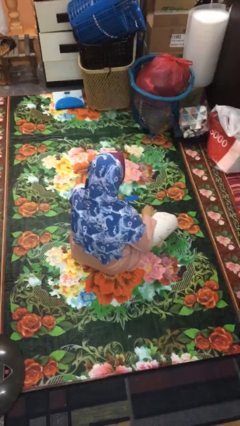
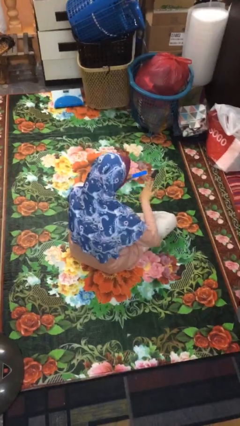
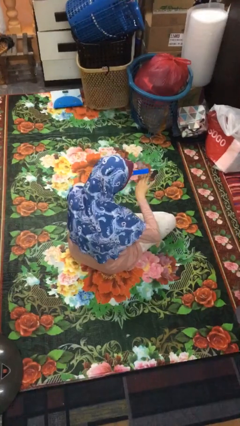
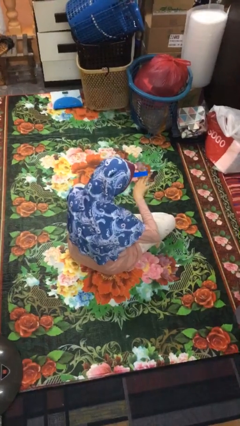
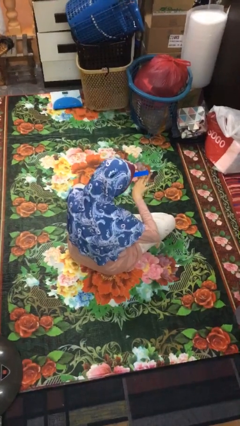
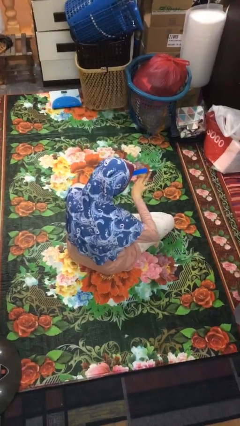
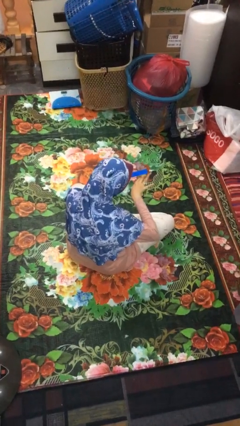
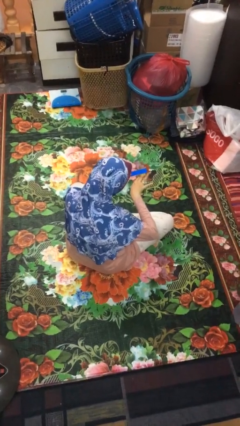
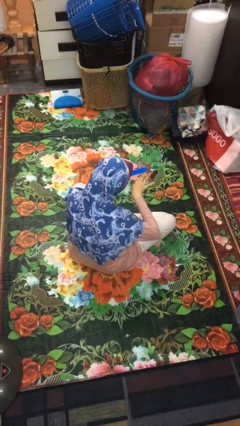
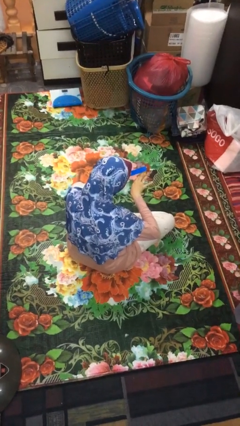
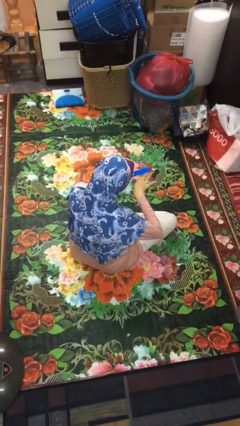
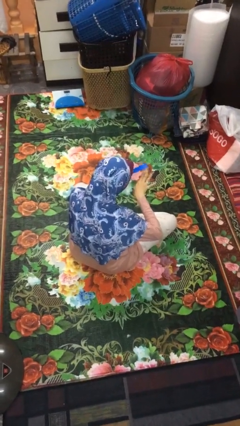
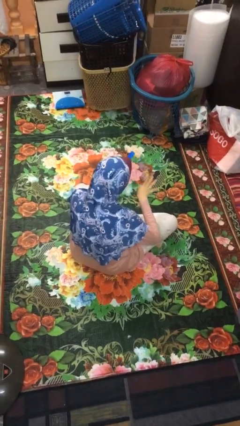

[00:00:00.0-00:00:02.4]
person files fingernails

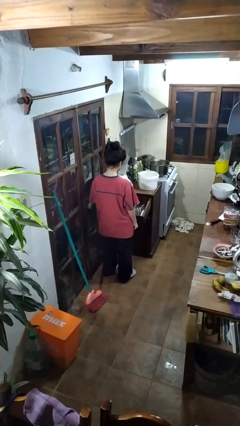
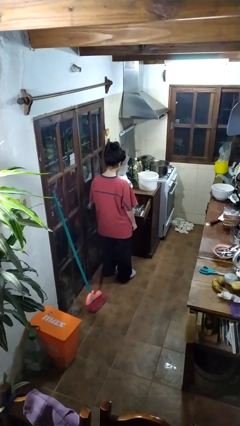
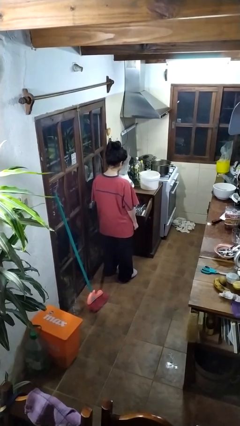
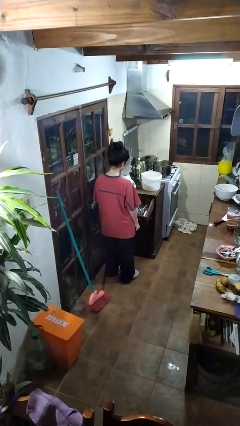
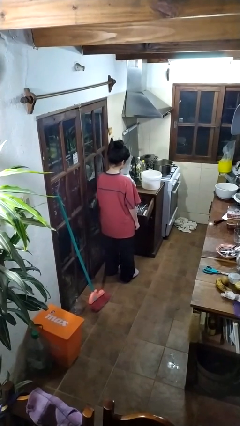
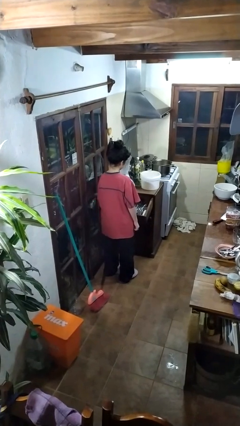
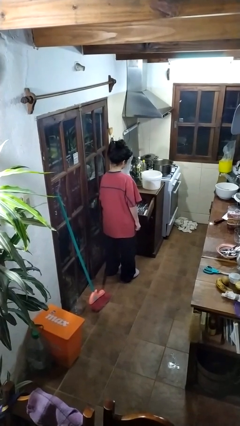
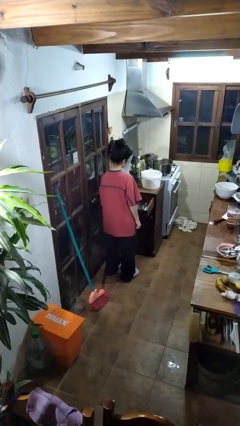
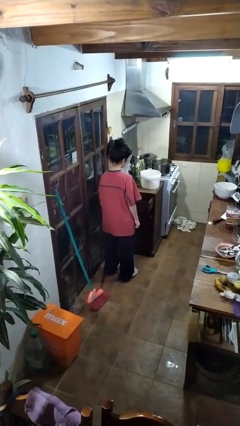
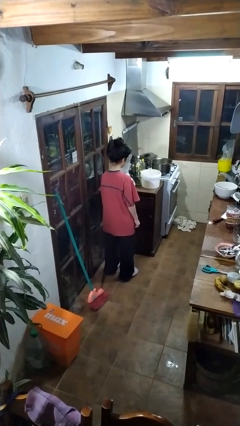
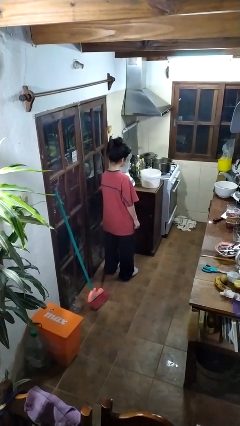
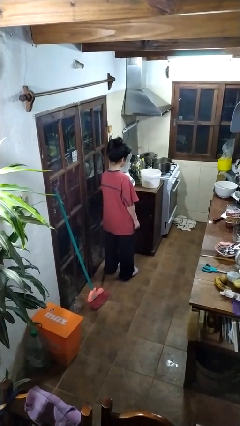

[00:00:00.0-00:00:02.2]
person closes kitchen drawer

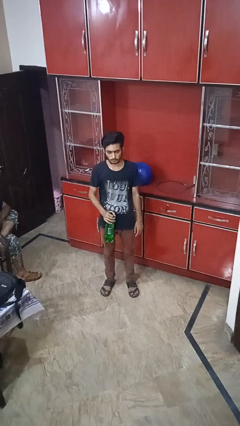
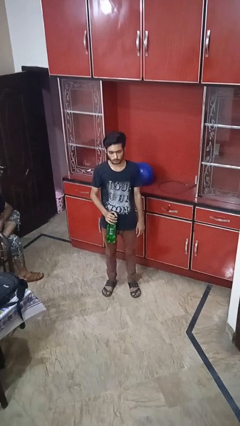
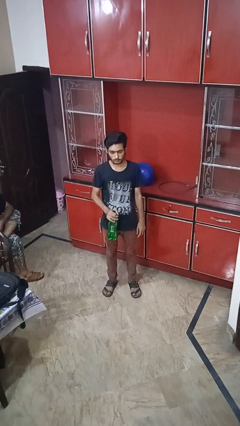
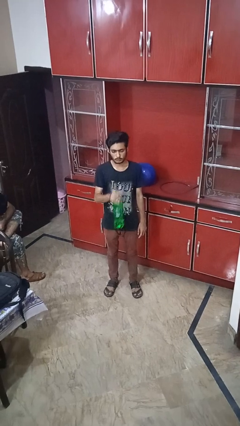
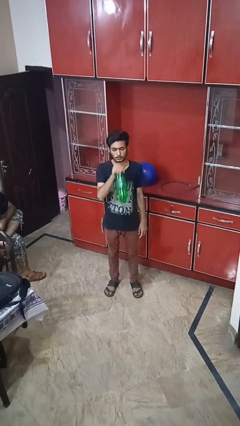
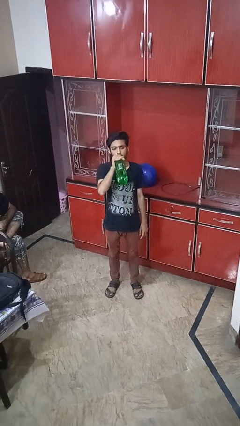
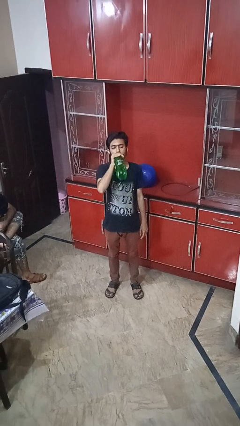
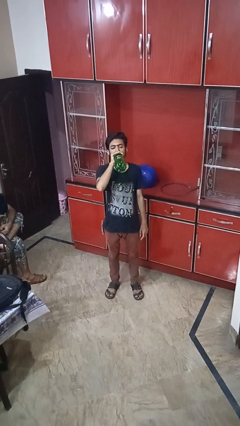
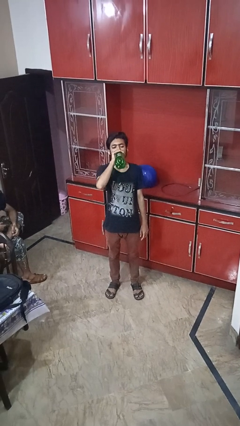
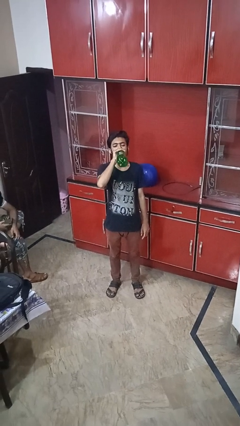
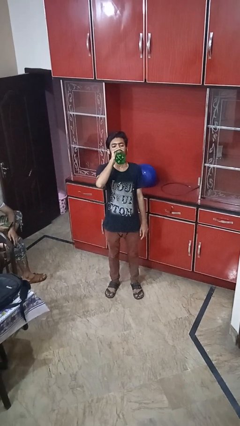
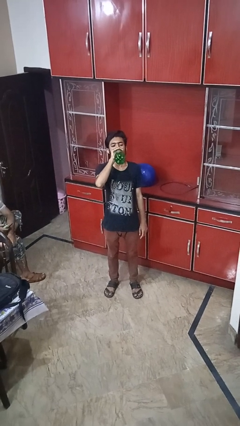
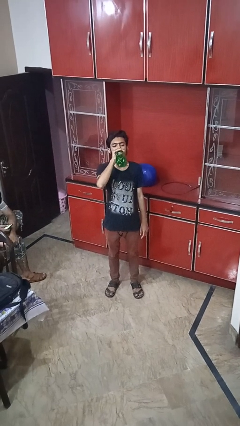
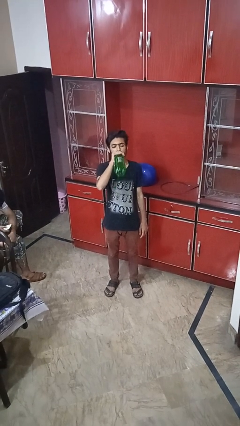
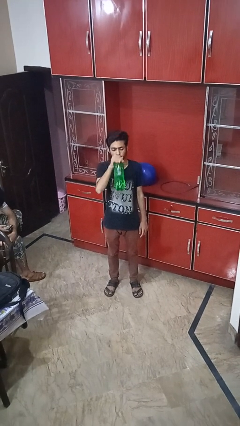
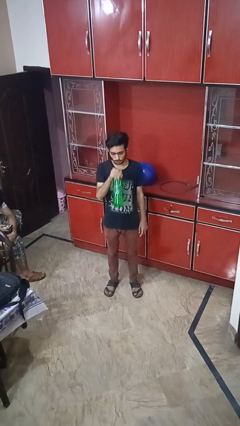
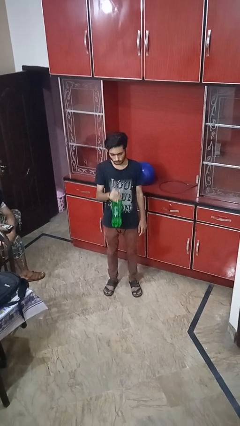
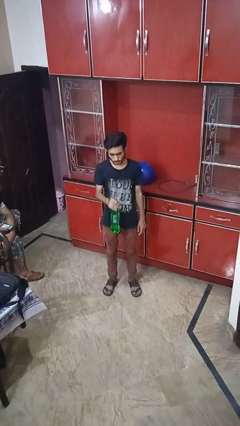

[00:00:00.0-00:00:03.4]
person drinks from bottle

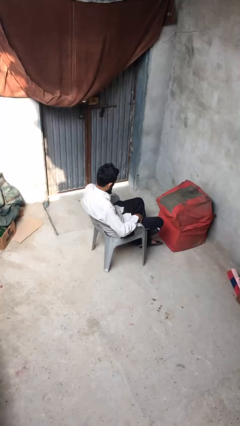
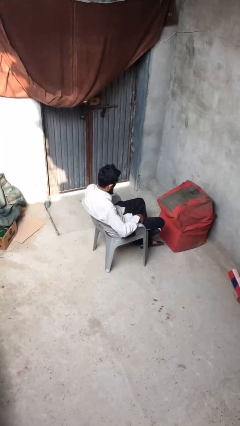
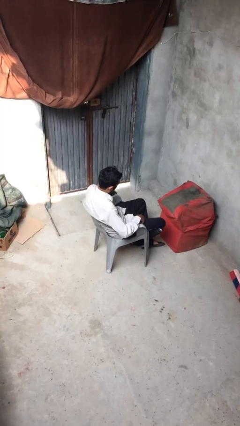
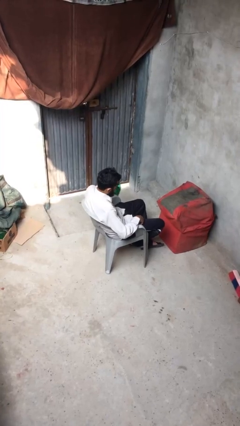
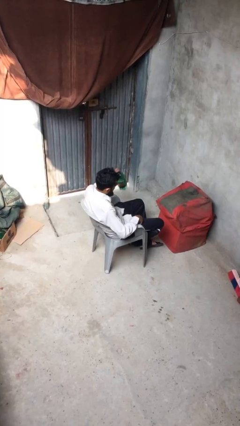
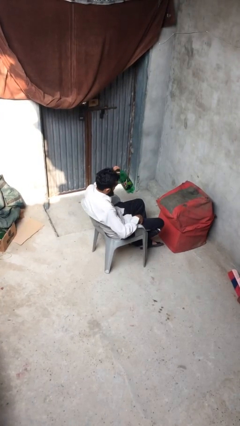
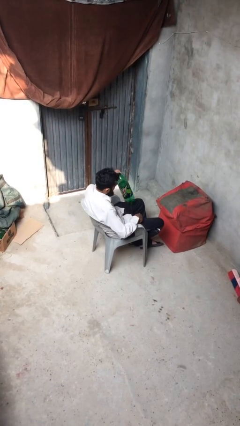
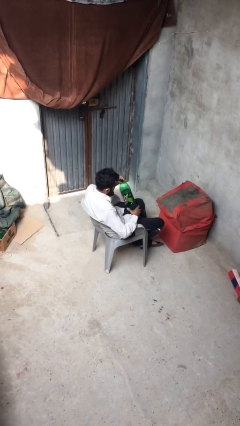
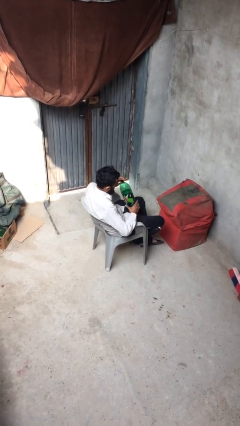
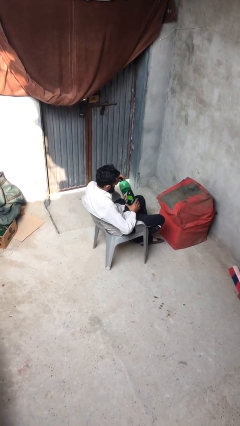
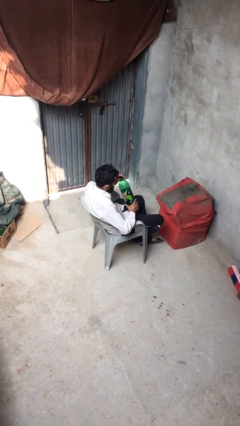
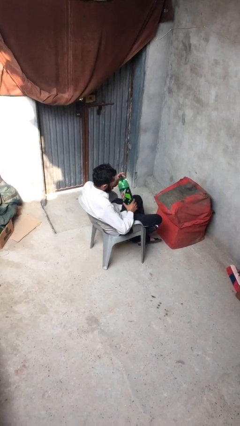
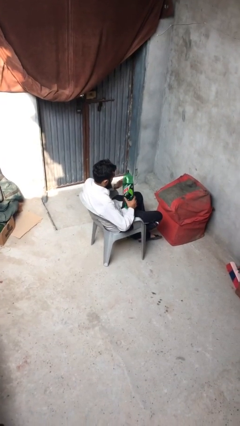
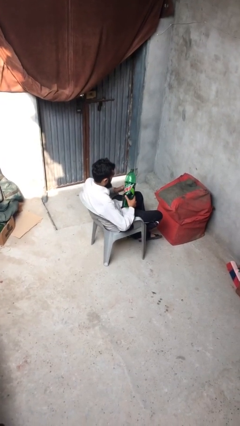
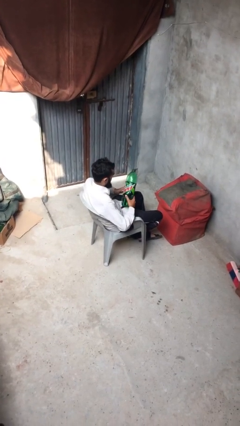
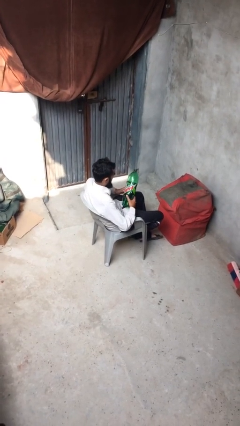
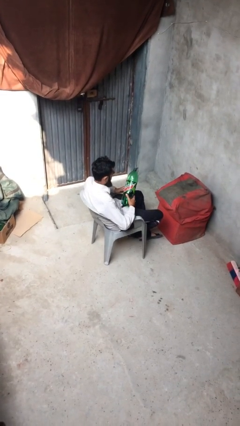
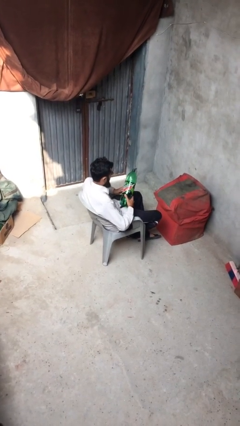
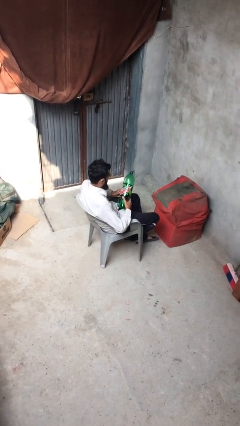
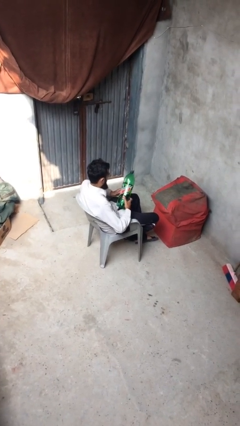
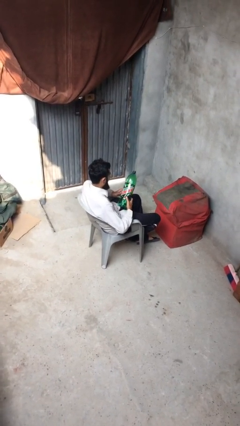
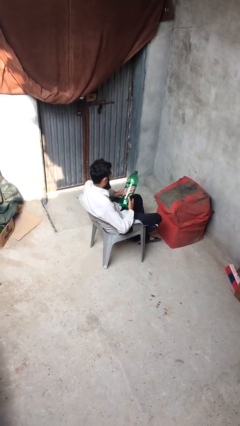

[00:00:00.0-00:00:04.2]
person picks up object from floor

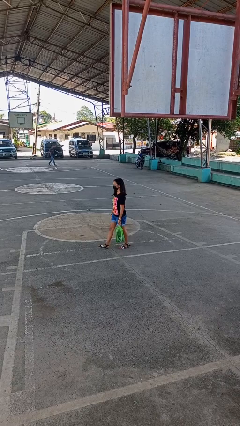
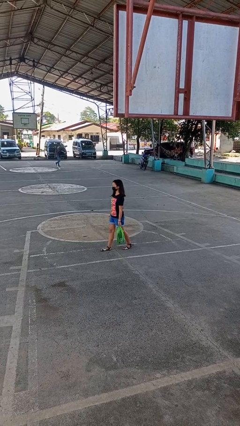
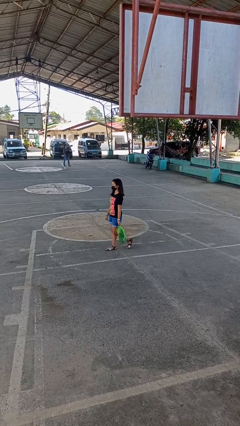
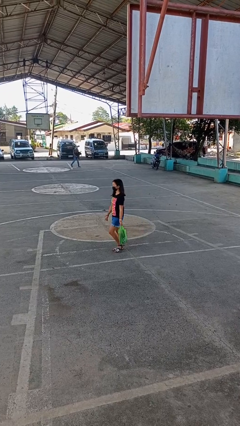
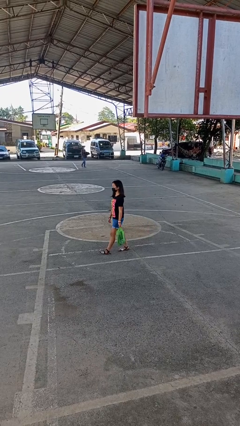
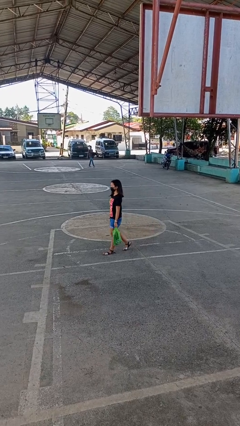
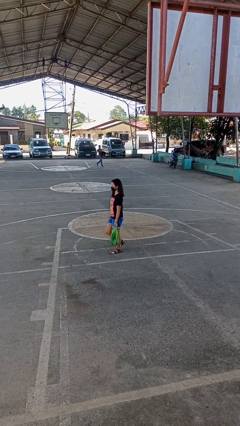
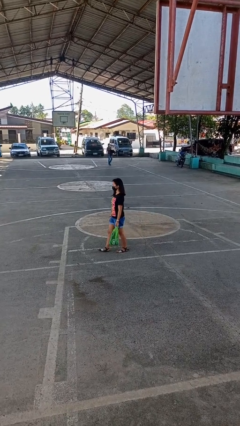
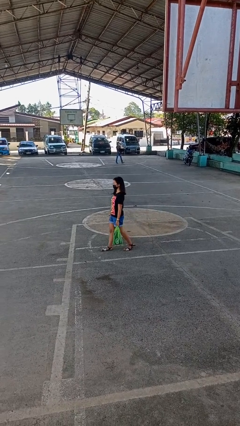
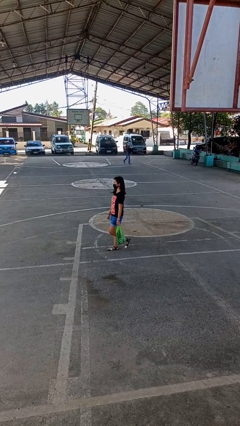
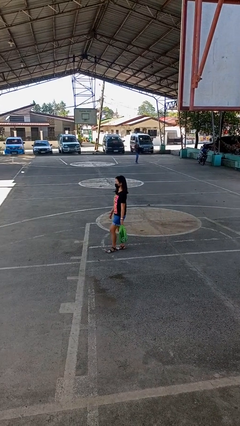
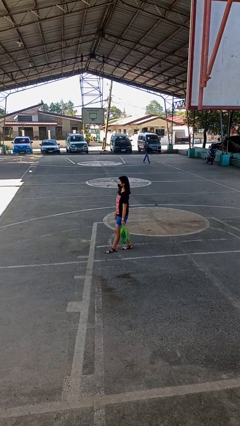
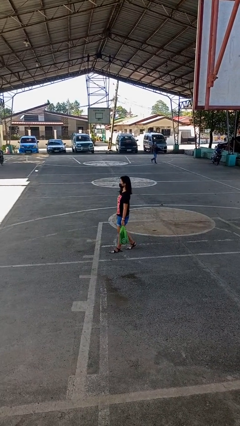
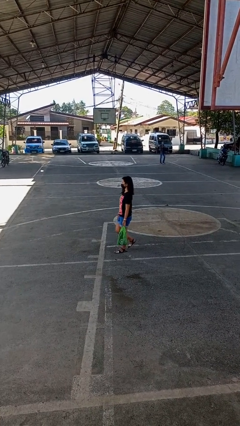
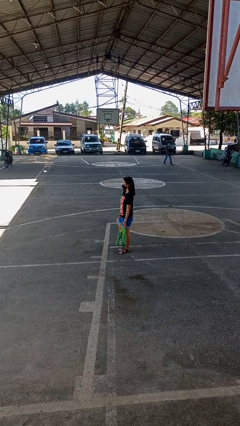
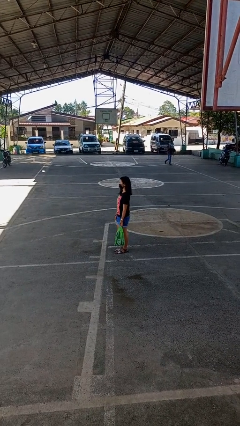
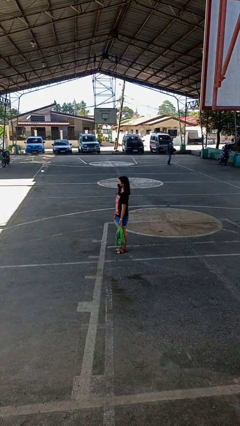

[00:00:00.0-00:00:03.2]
person carries groceries

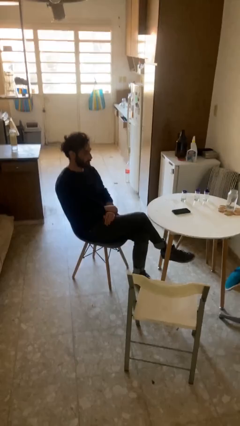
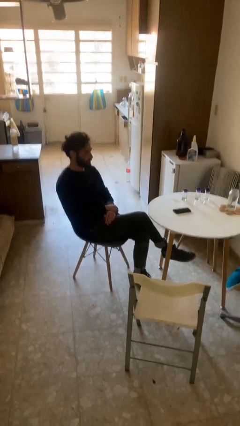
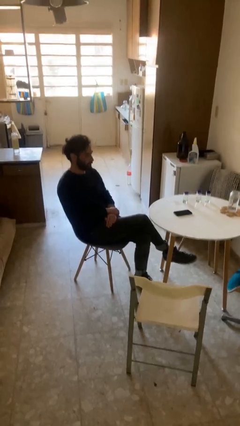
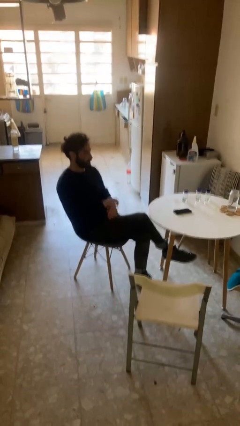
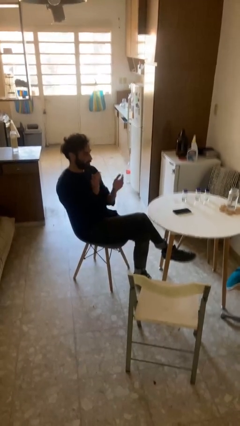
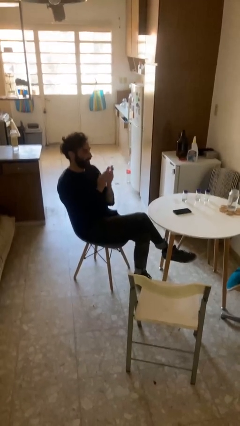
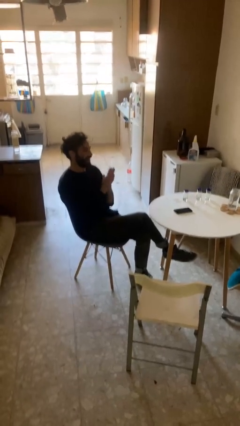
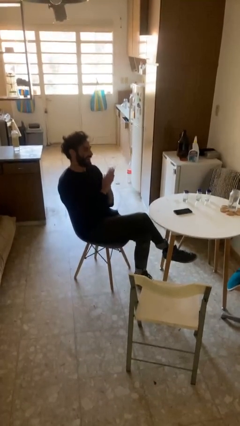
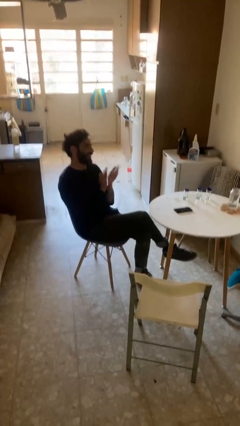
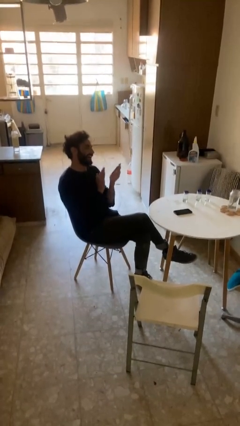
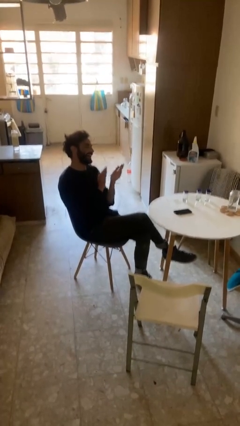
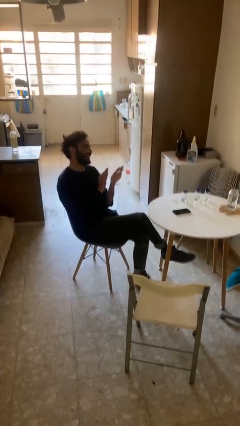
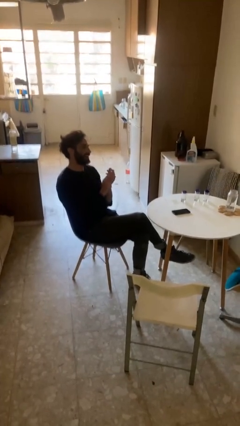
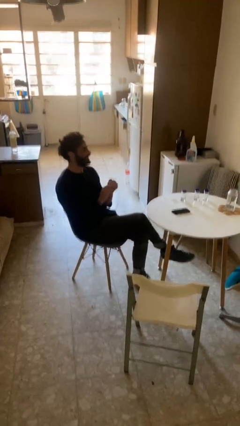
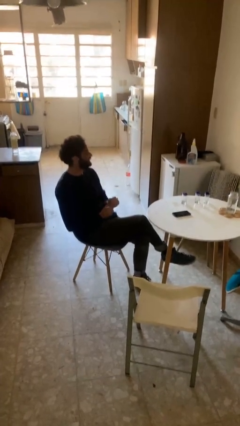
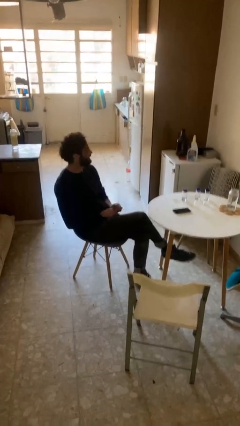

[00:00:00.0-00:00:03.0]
person claps hands
